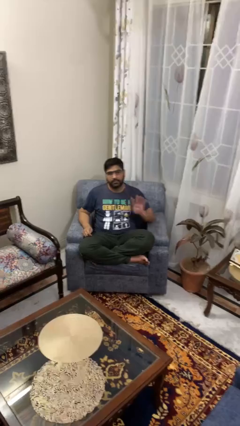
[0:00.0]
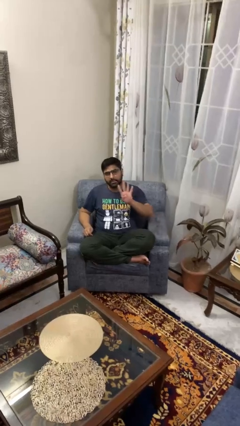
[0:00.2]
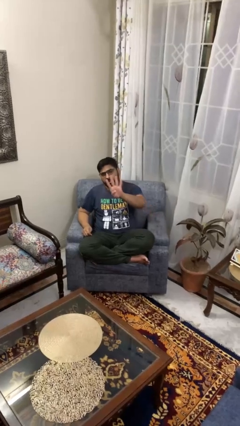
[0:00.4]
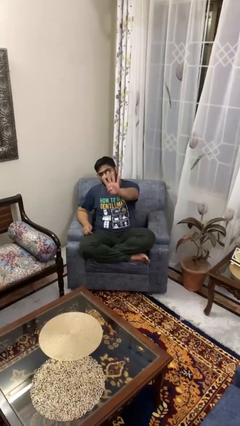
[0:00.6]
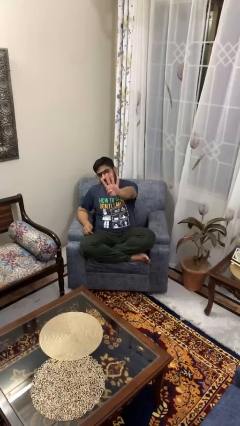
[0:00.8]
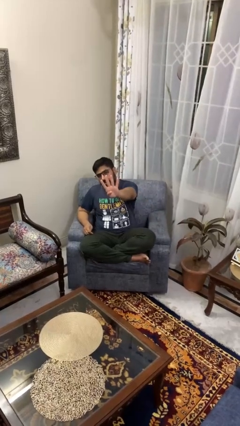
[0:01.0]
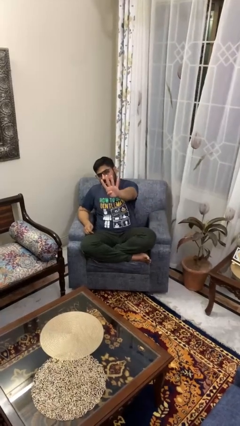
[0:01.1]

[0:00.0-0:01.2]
person gestures number four

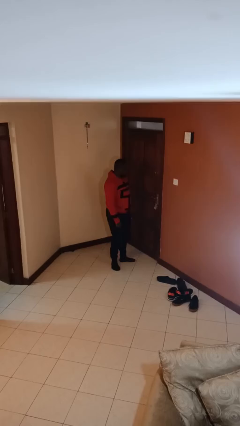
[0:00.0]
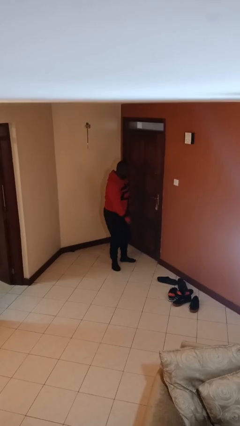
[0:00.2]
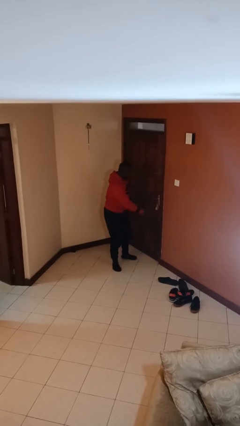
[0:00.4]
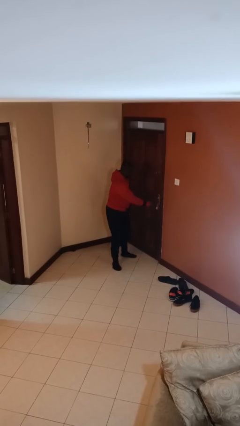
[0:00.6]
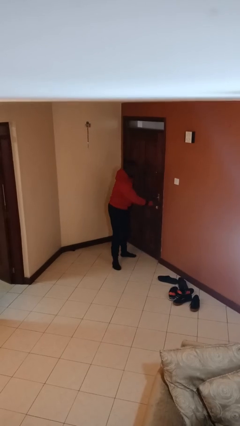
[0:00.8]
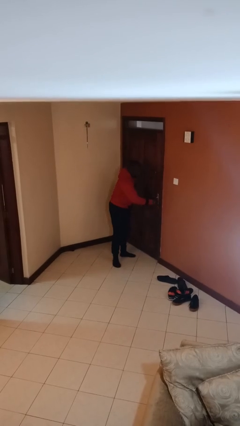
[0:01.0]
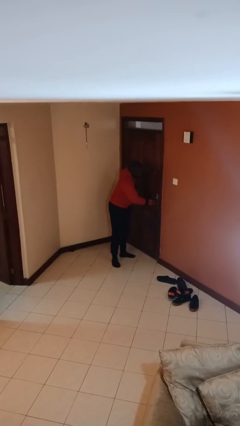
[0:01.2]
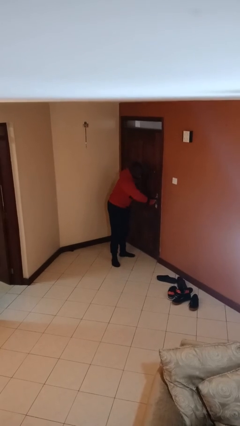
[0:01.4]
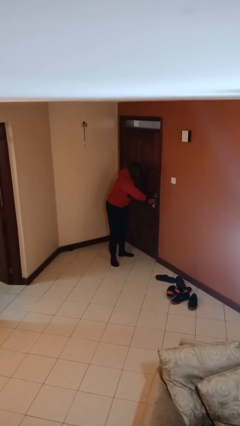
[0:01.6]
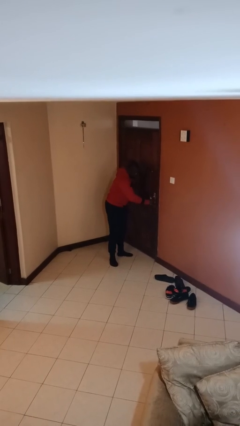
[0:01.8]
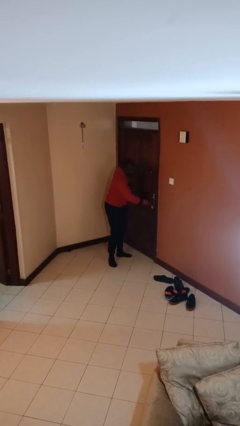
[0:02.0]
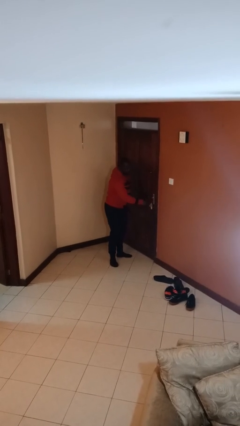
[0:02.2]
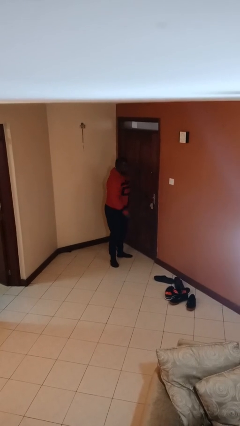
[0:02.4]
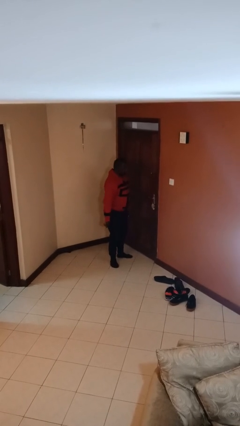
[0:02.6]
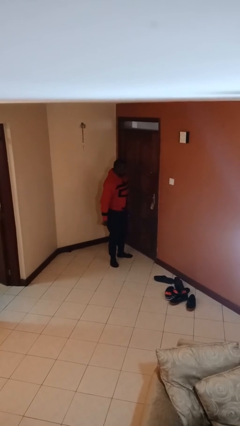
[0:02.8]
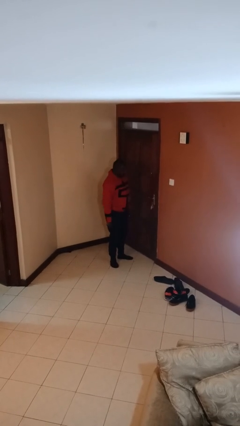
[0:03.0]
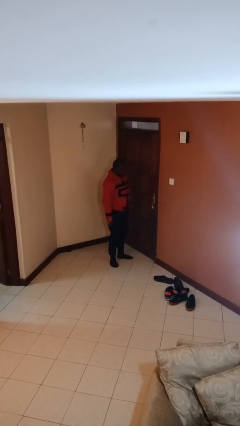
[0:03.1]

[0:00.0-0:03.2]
person unlocks door with keys

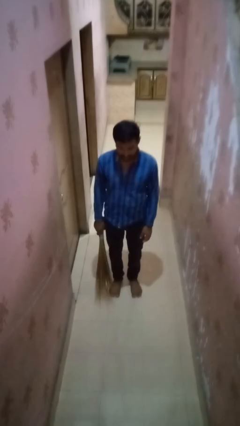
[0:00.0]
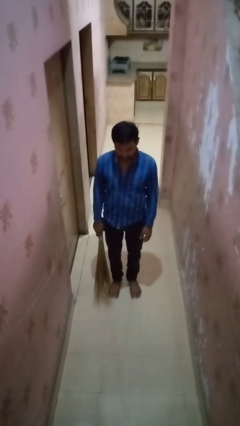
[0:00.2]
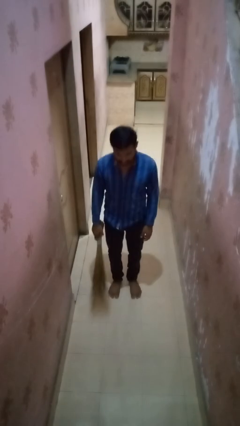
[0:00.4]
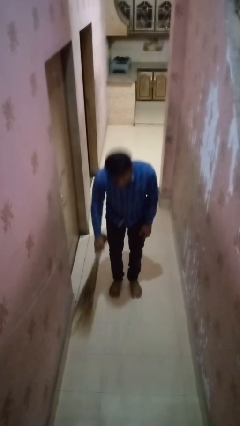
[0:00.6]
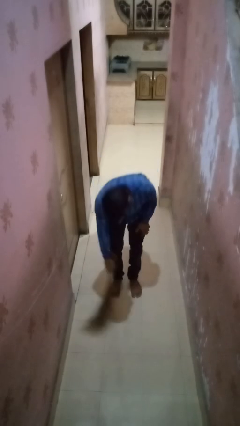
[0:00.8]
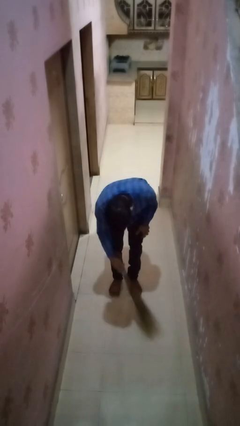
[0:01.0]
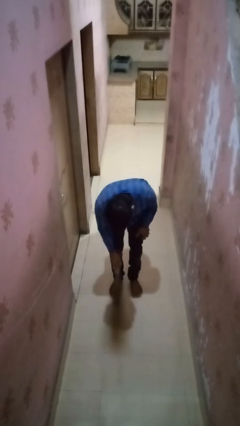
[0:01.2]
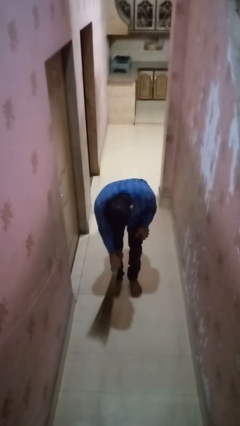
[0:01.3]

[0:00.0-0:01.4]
person sweeps floor

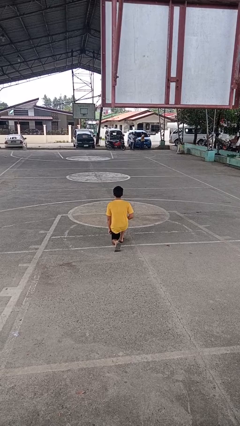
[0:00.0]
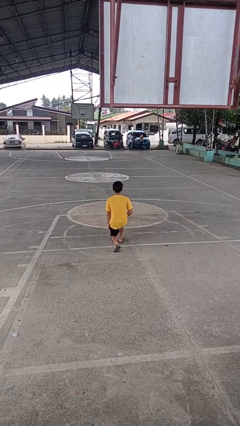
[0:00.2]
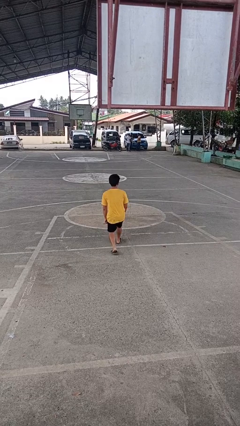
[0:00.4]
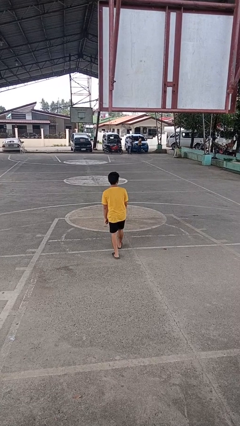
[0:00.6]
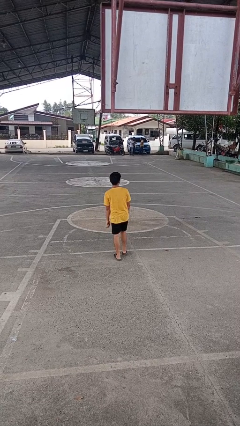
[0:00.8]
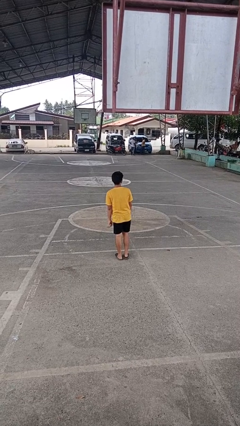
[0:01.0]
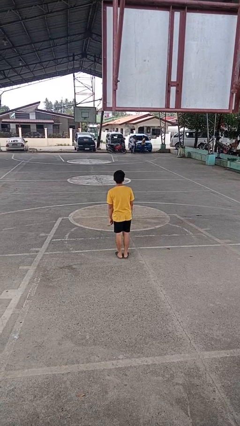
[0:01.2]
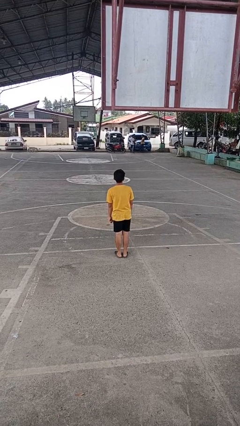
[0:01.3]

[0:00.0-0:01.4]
person stands up from floor

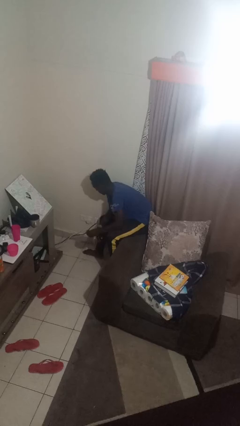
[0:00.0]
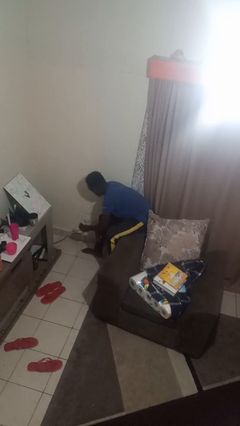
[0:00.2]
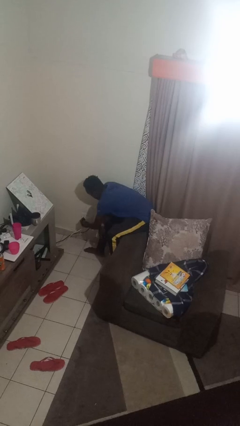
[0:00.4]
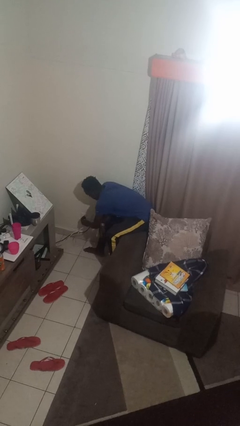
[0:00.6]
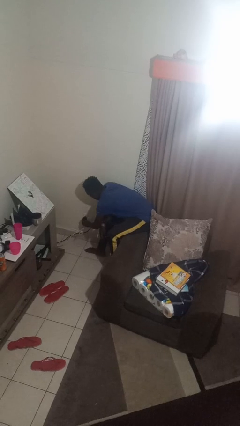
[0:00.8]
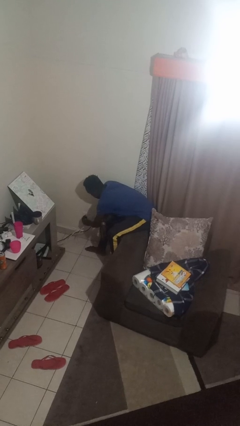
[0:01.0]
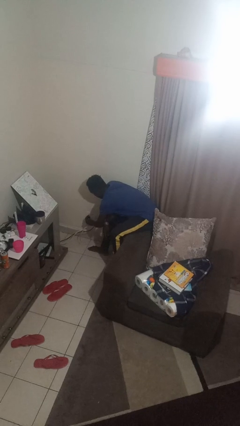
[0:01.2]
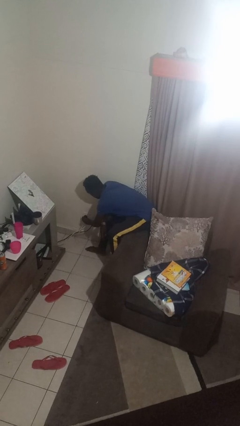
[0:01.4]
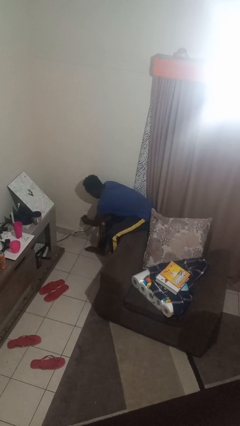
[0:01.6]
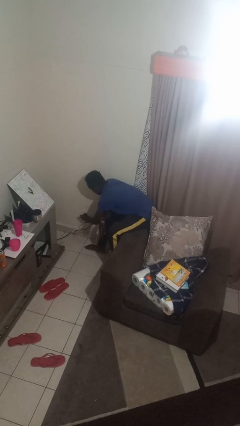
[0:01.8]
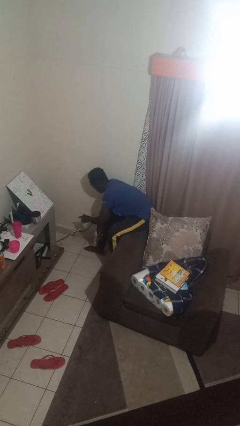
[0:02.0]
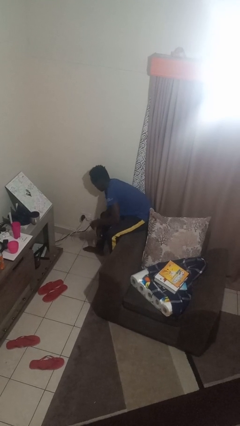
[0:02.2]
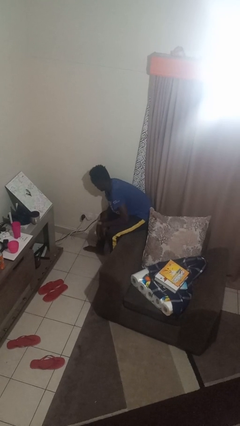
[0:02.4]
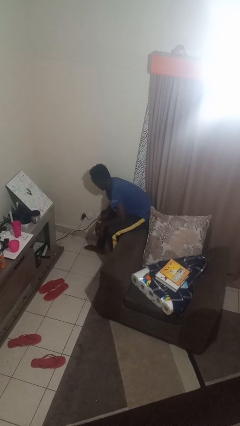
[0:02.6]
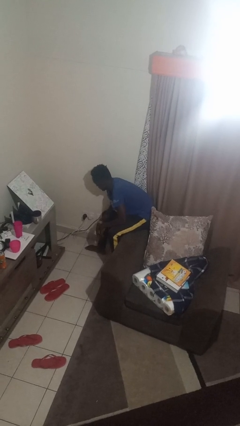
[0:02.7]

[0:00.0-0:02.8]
person plugs into electrical socket

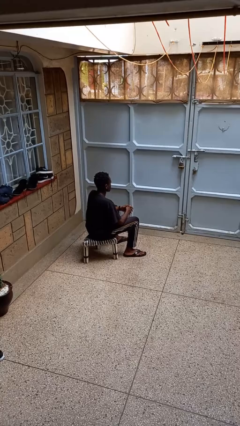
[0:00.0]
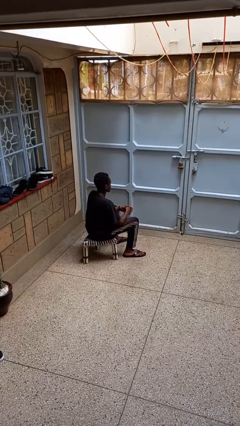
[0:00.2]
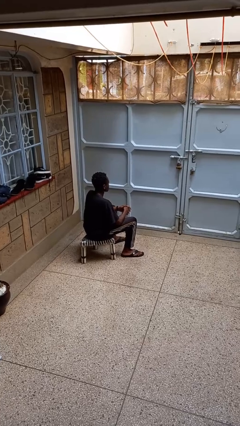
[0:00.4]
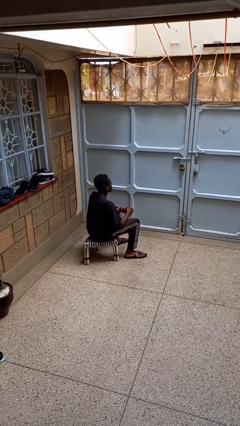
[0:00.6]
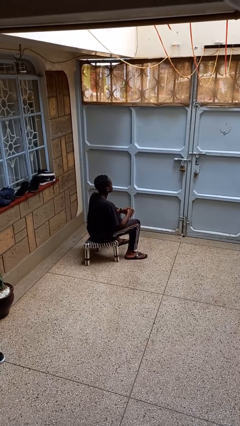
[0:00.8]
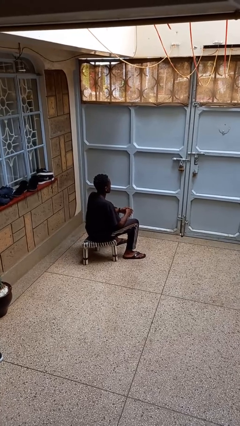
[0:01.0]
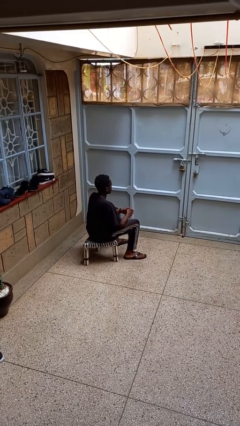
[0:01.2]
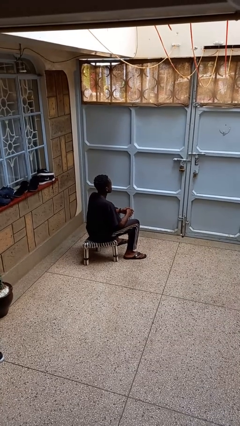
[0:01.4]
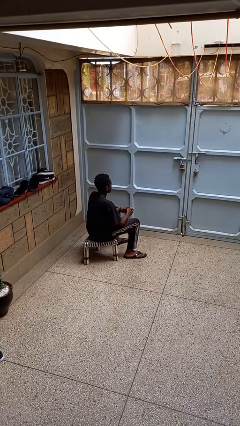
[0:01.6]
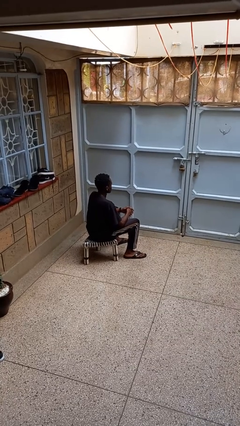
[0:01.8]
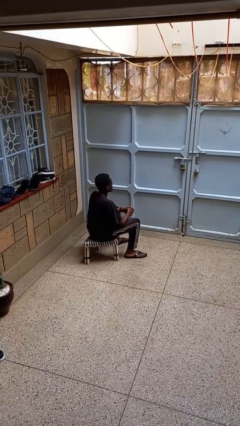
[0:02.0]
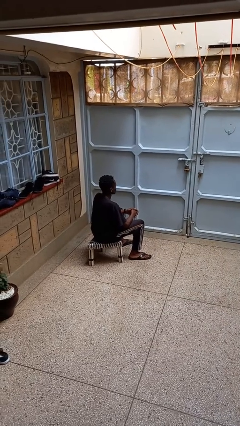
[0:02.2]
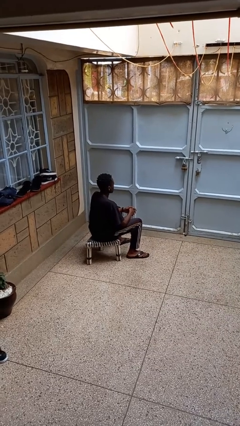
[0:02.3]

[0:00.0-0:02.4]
person nods head

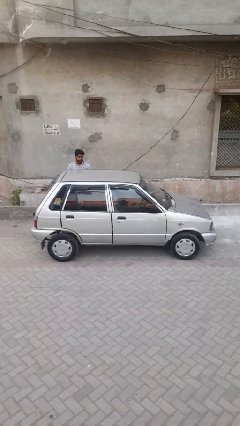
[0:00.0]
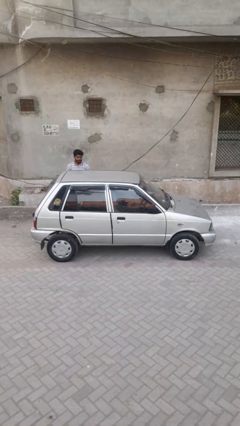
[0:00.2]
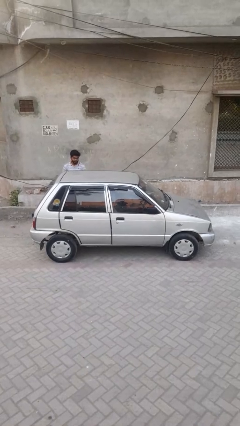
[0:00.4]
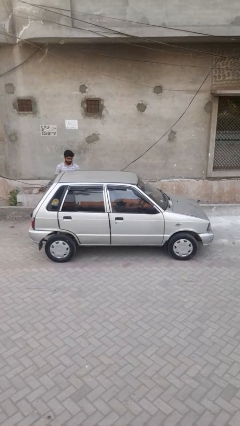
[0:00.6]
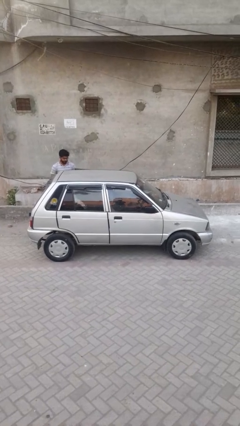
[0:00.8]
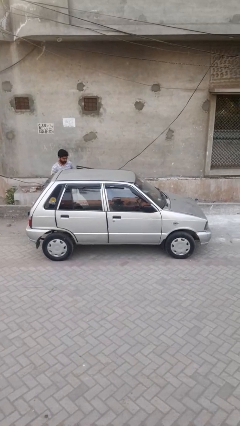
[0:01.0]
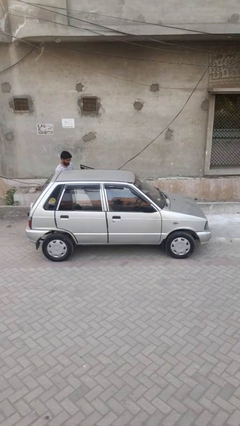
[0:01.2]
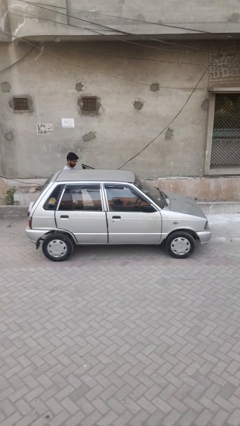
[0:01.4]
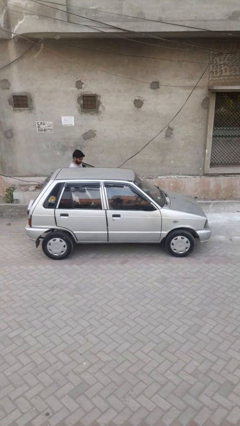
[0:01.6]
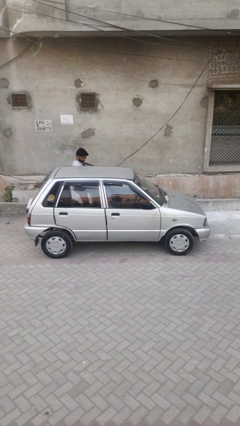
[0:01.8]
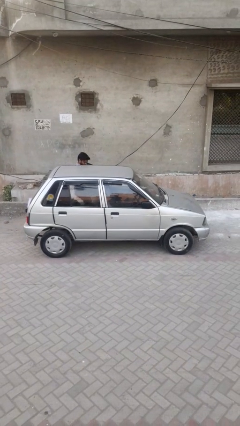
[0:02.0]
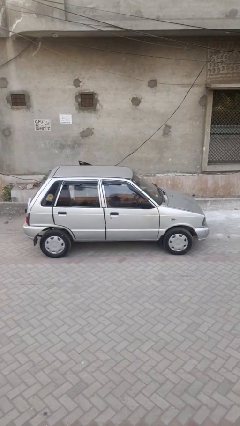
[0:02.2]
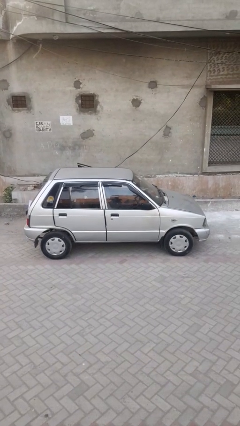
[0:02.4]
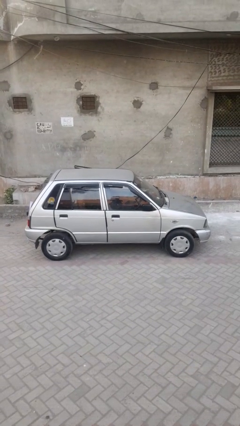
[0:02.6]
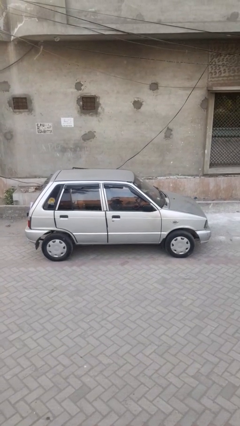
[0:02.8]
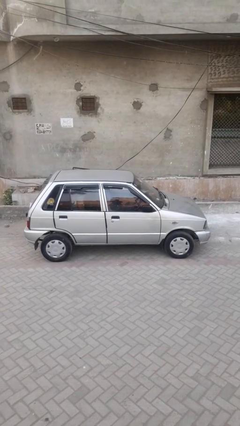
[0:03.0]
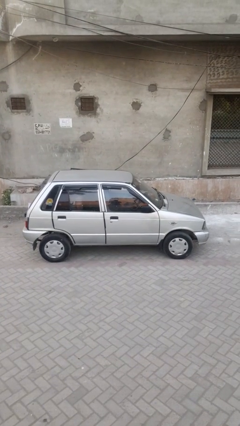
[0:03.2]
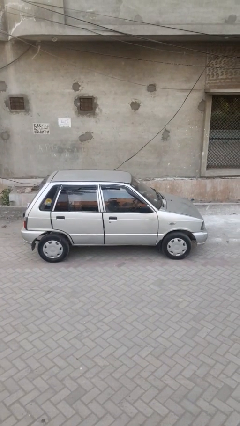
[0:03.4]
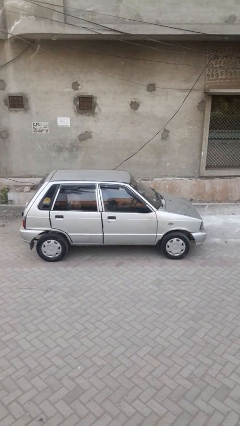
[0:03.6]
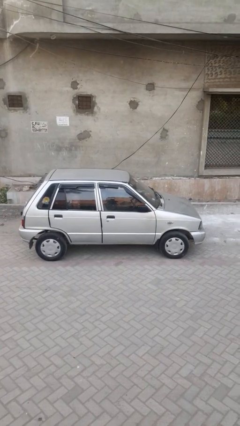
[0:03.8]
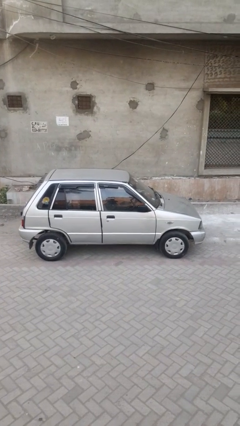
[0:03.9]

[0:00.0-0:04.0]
car picks up person

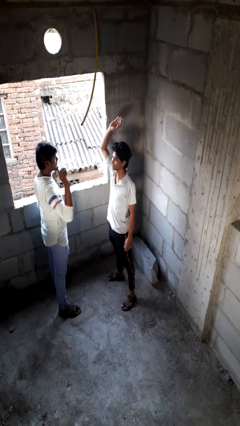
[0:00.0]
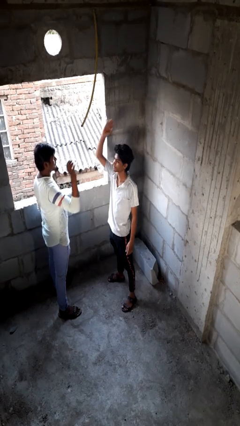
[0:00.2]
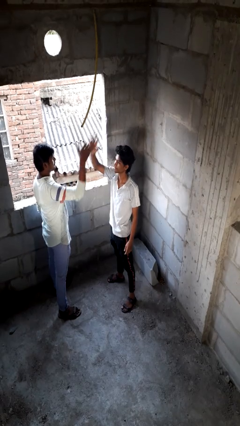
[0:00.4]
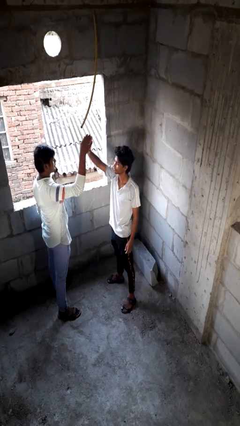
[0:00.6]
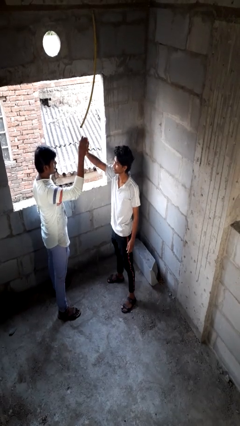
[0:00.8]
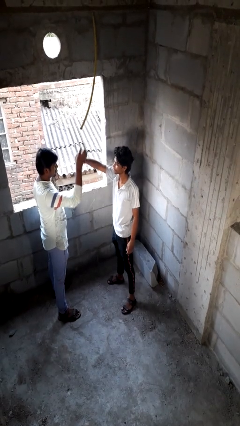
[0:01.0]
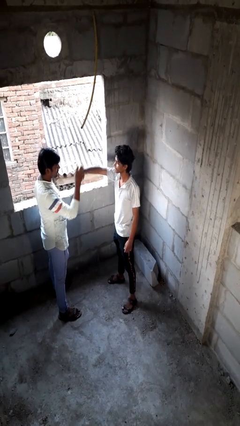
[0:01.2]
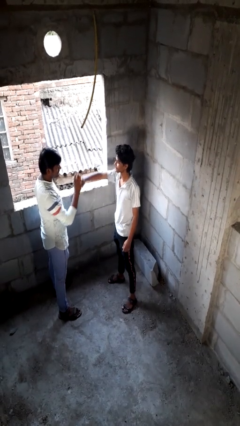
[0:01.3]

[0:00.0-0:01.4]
person highfives hand
